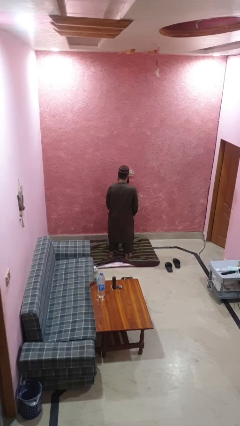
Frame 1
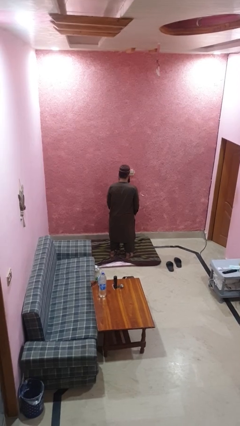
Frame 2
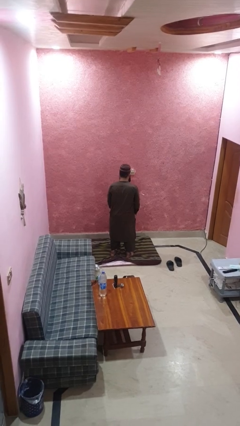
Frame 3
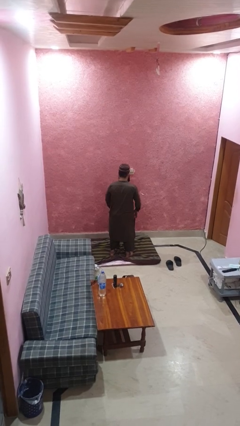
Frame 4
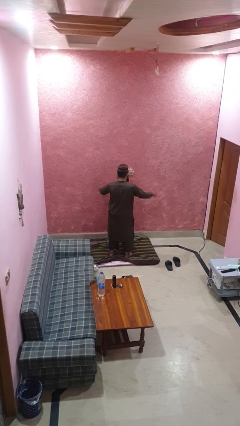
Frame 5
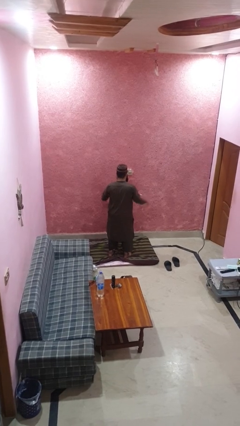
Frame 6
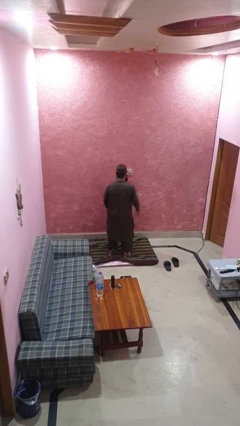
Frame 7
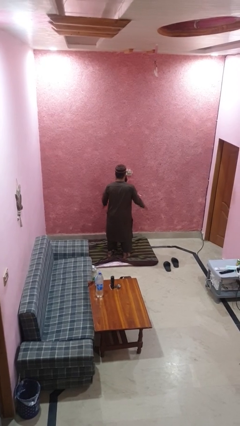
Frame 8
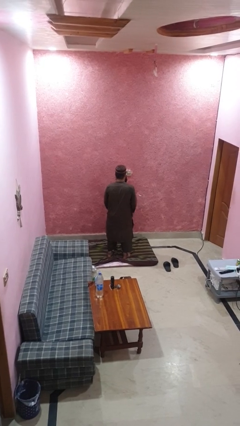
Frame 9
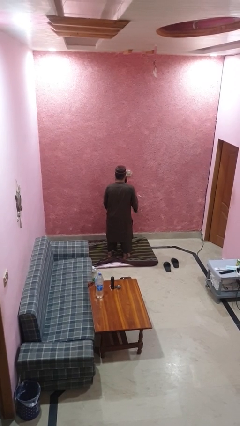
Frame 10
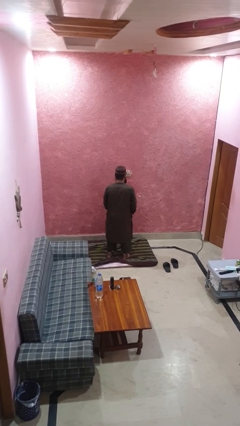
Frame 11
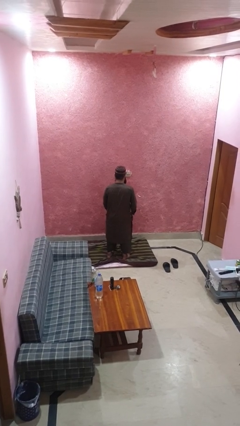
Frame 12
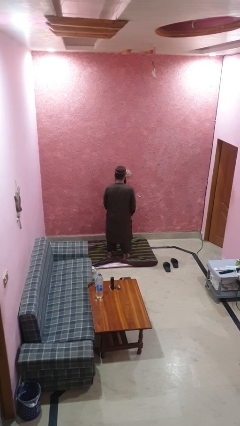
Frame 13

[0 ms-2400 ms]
person slaps hands on thighs

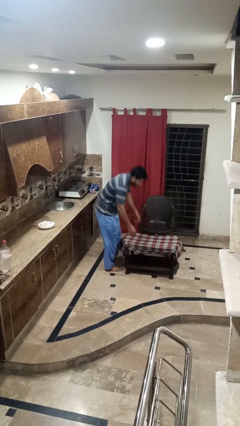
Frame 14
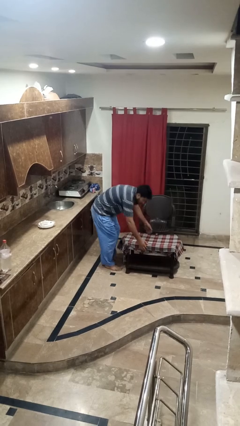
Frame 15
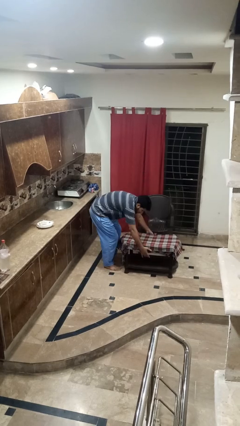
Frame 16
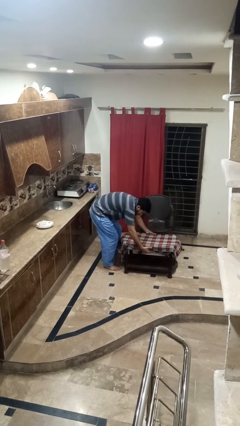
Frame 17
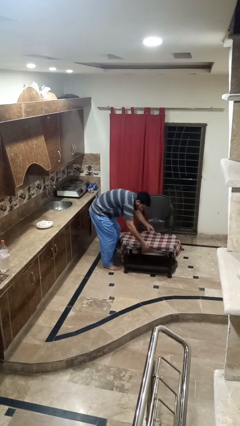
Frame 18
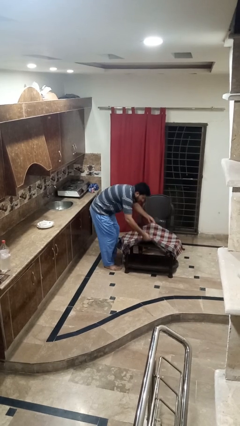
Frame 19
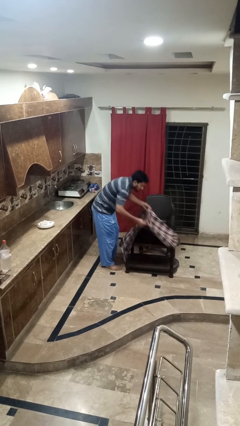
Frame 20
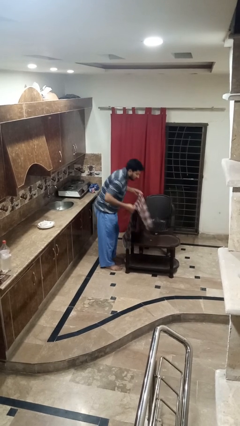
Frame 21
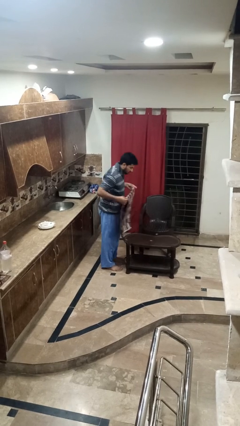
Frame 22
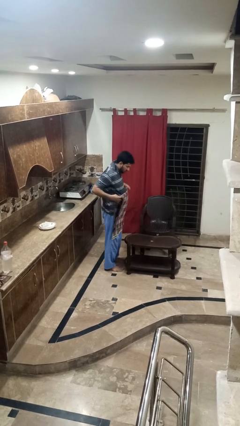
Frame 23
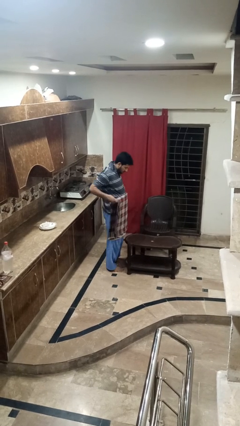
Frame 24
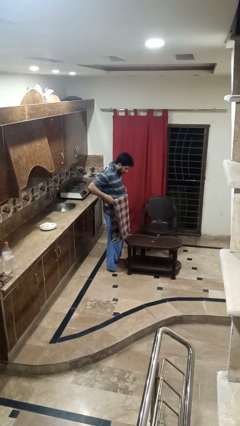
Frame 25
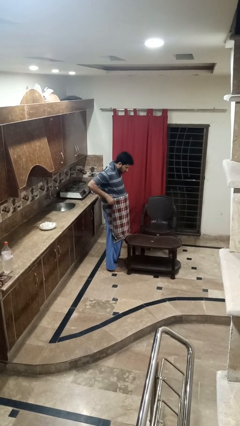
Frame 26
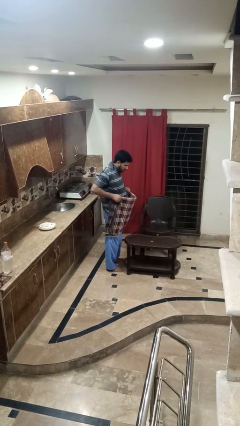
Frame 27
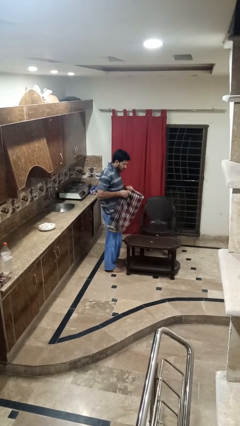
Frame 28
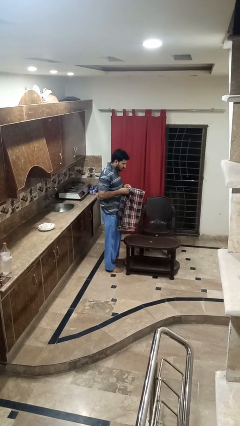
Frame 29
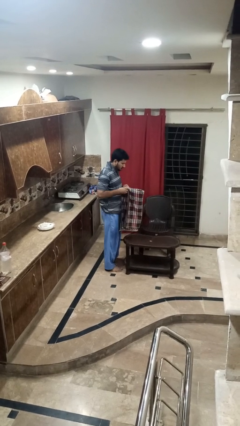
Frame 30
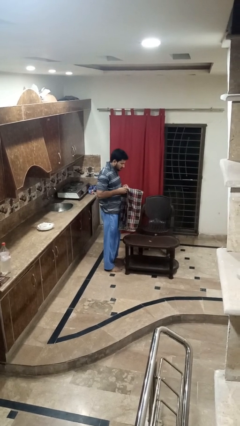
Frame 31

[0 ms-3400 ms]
person folds tablecloth

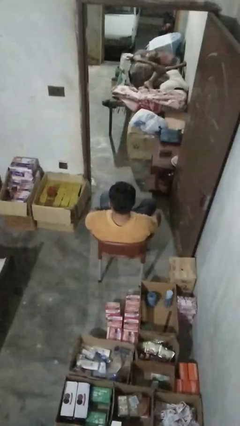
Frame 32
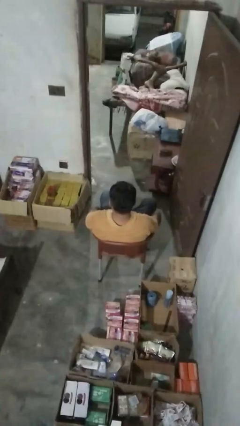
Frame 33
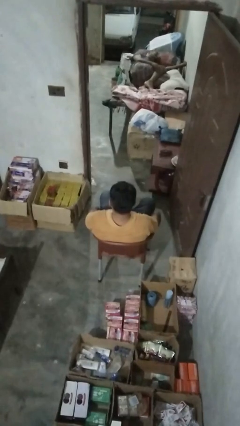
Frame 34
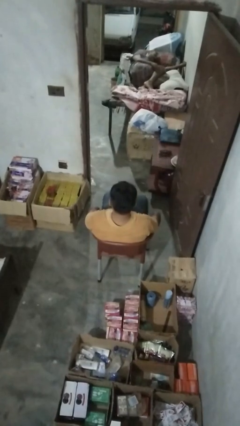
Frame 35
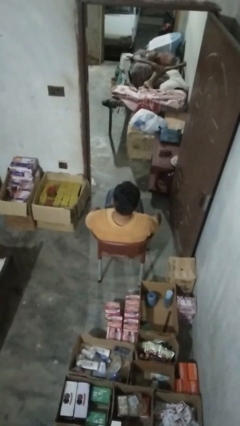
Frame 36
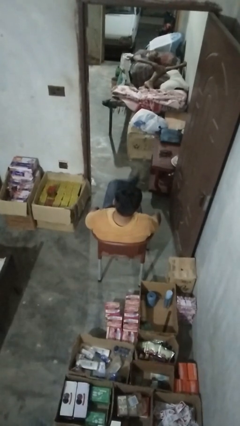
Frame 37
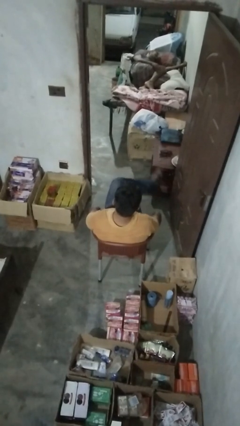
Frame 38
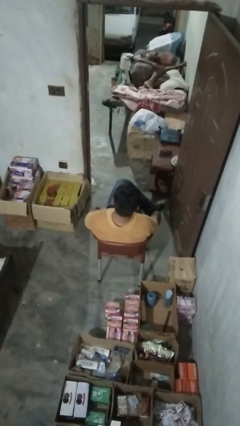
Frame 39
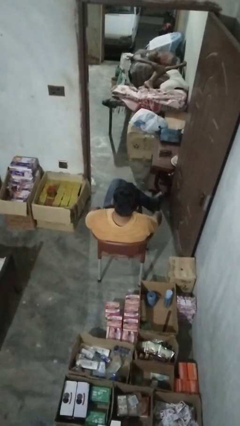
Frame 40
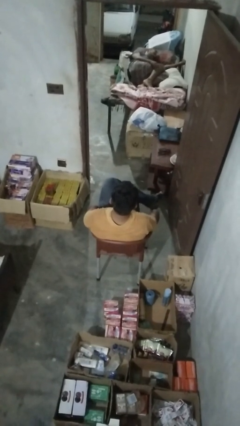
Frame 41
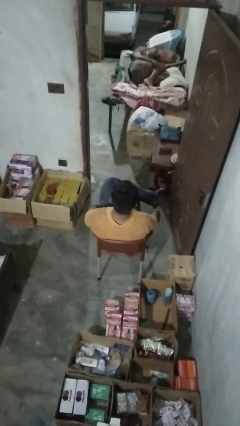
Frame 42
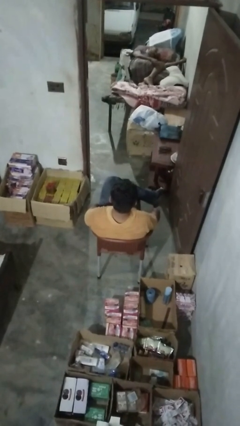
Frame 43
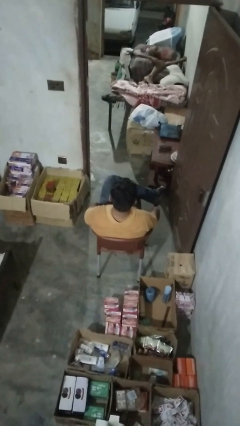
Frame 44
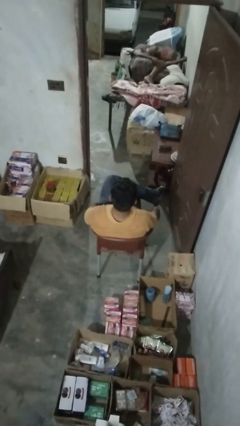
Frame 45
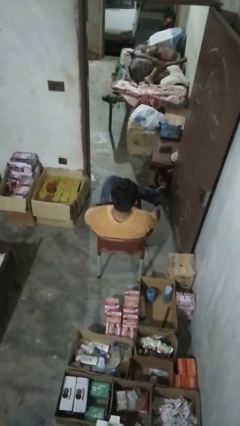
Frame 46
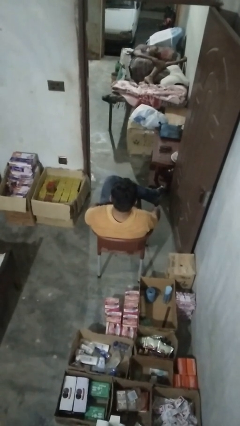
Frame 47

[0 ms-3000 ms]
person crosses legs

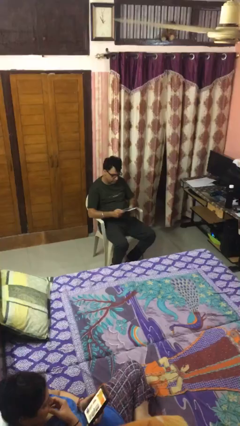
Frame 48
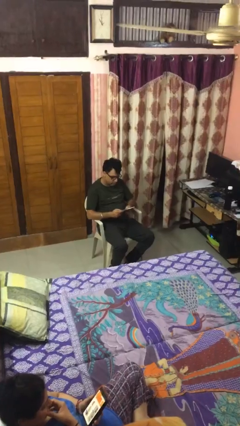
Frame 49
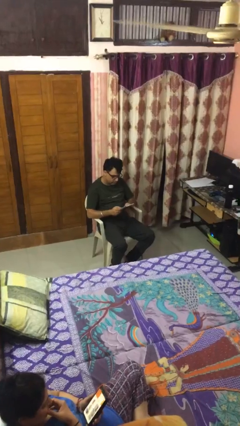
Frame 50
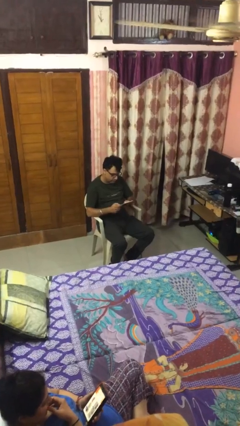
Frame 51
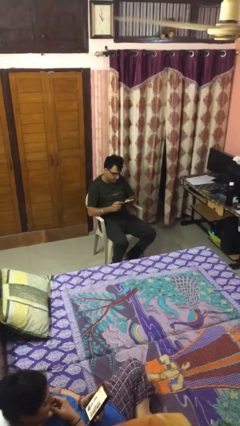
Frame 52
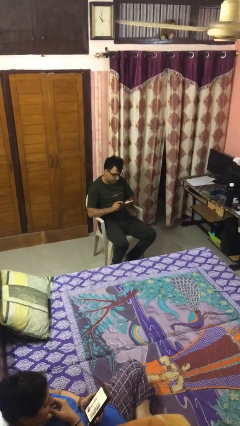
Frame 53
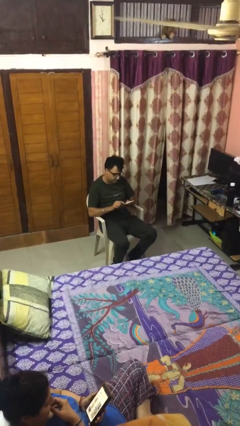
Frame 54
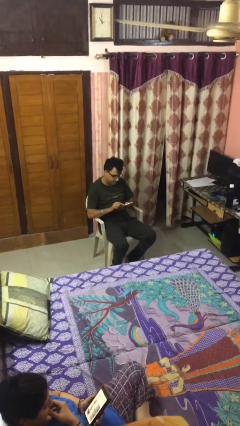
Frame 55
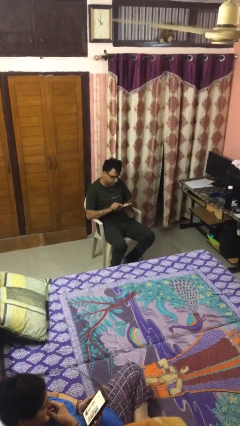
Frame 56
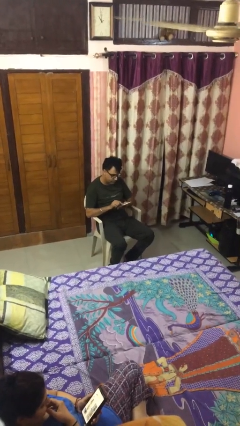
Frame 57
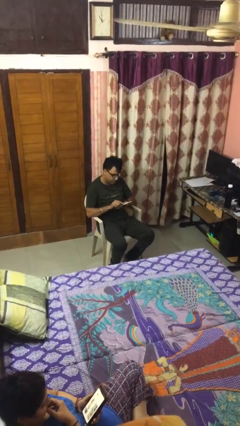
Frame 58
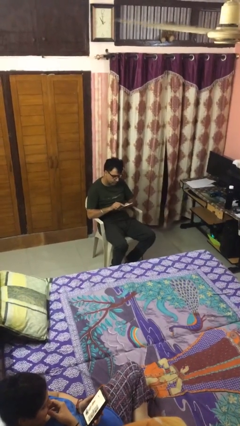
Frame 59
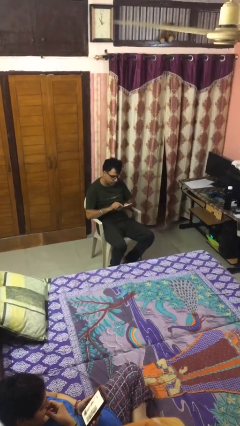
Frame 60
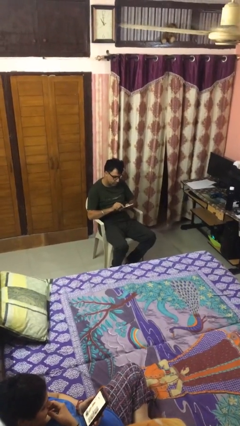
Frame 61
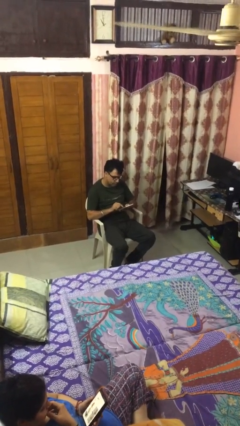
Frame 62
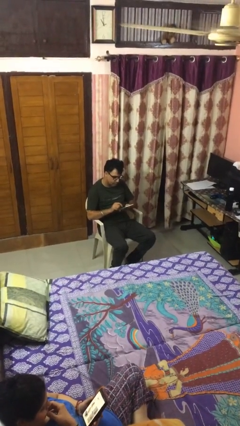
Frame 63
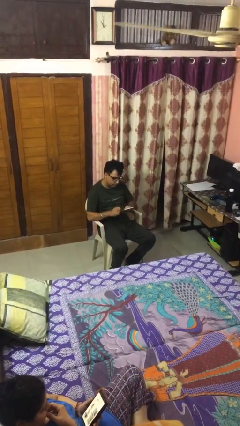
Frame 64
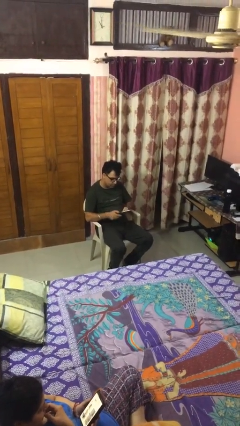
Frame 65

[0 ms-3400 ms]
person interacts with tablet

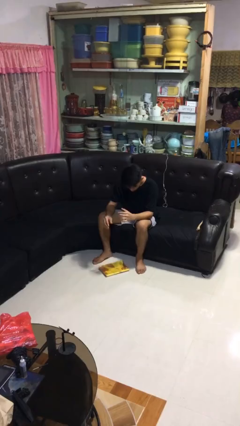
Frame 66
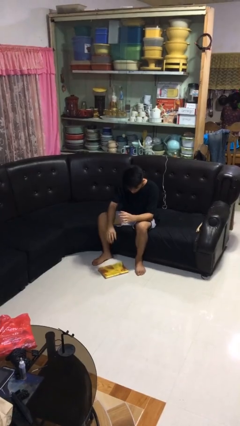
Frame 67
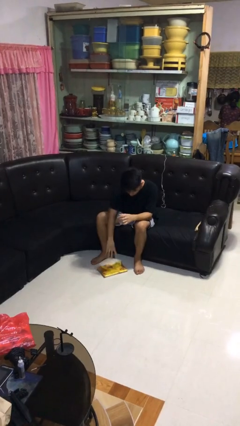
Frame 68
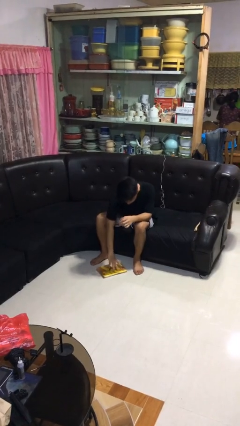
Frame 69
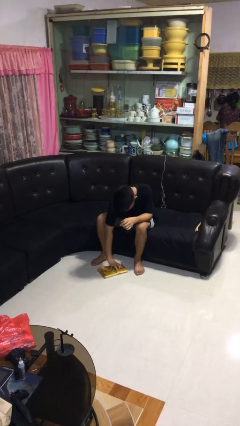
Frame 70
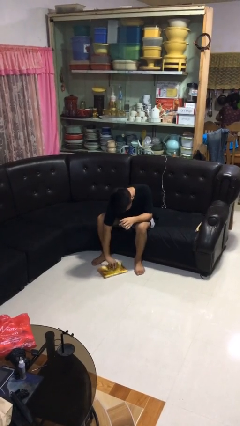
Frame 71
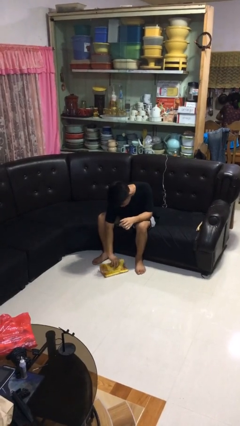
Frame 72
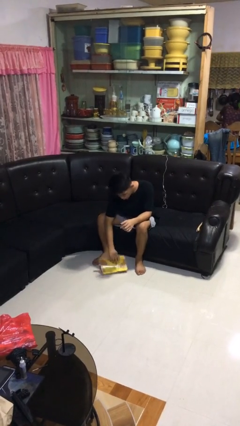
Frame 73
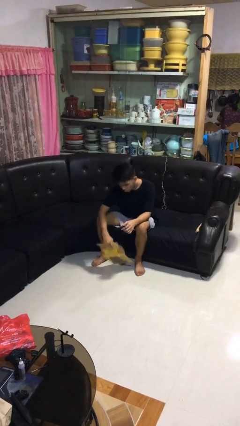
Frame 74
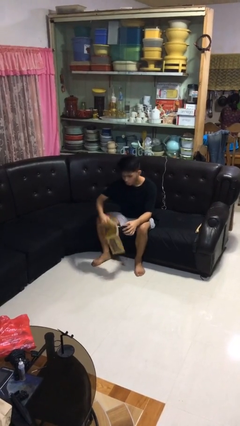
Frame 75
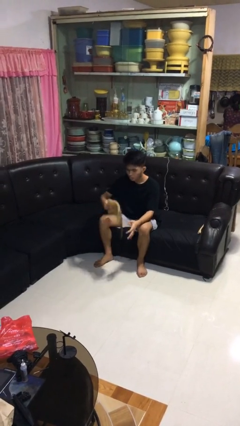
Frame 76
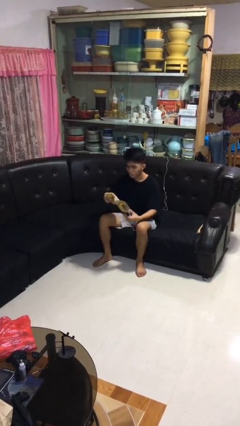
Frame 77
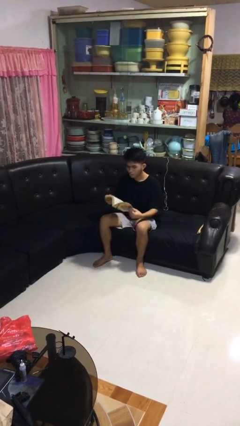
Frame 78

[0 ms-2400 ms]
person picks up object from floor

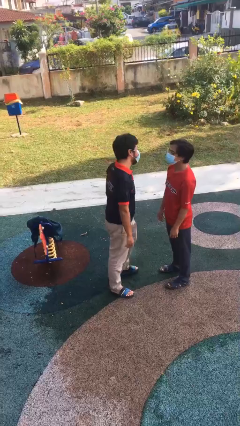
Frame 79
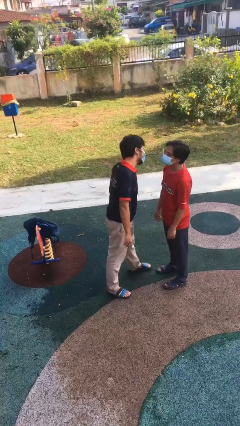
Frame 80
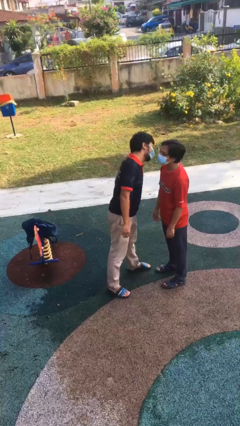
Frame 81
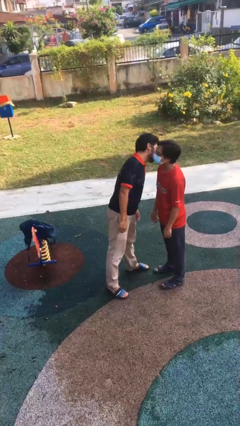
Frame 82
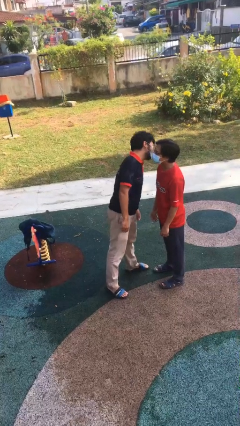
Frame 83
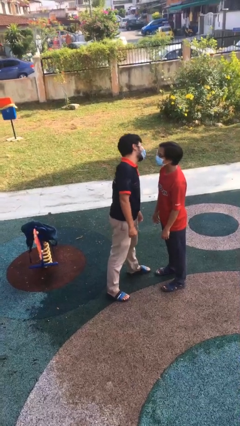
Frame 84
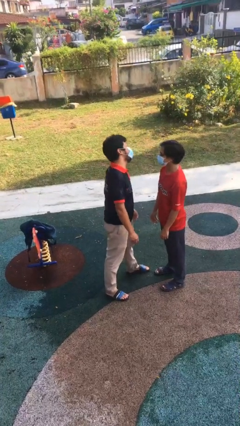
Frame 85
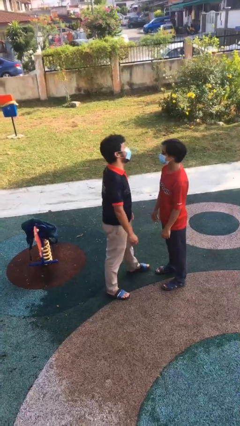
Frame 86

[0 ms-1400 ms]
person kisses cheek of person

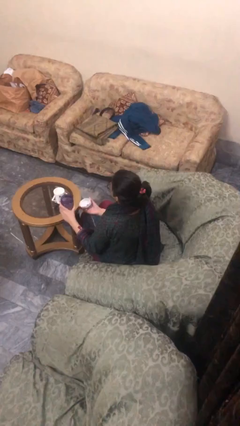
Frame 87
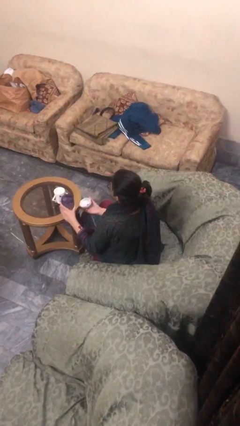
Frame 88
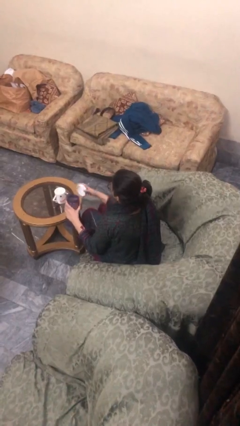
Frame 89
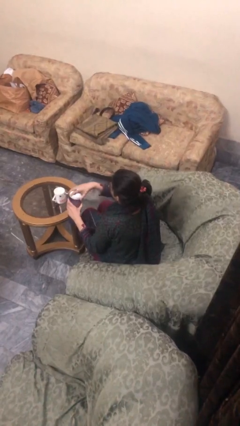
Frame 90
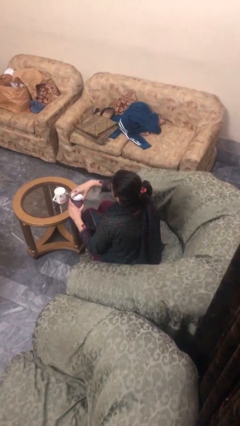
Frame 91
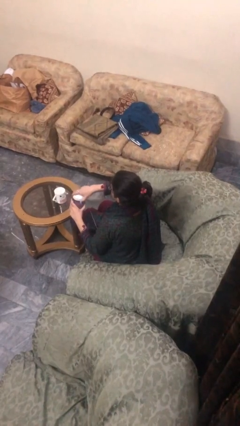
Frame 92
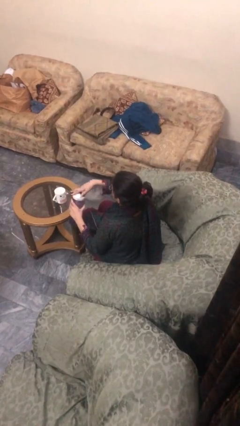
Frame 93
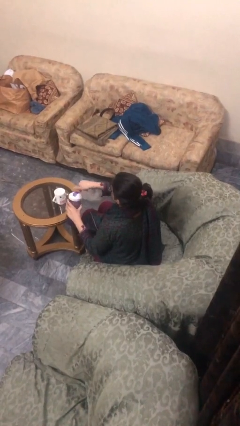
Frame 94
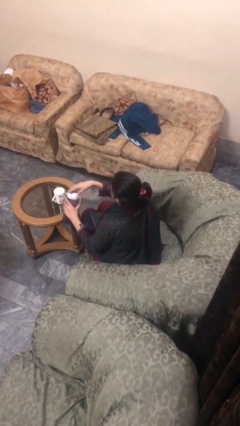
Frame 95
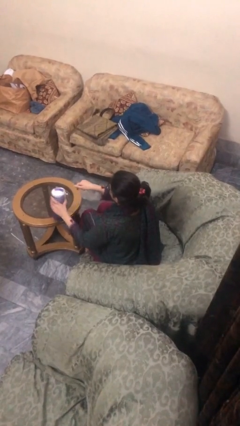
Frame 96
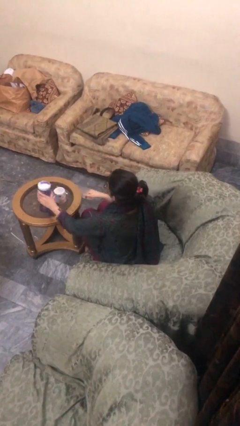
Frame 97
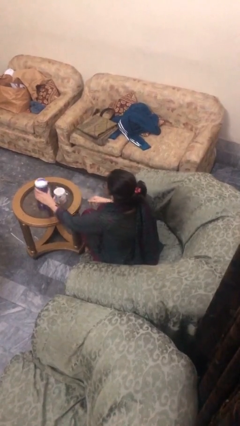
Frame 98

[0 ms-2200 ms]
person screws lid to bottle
